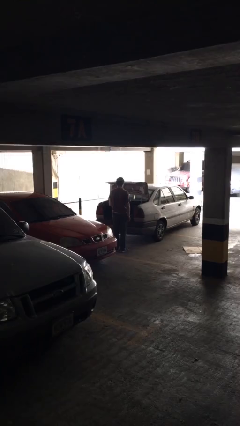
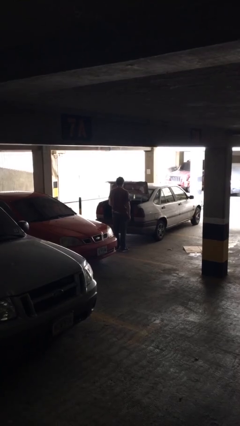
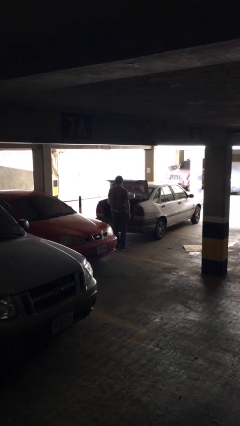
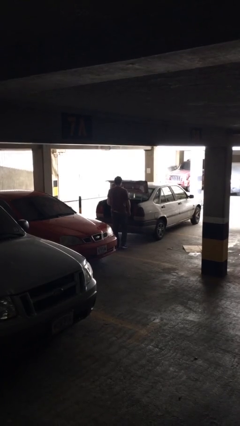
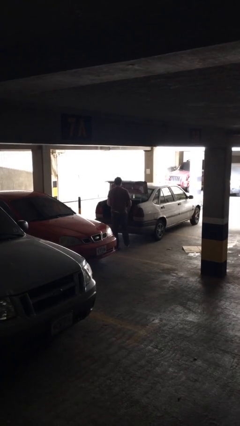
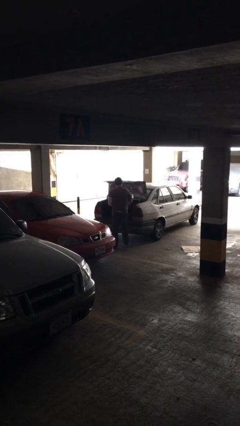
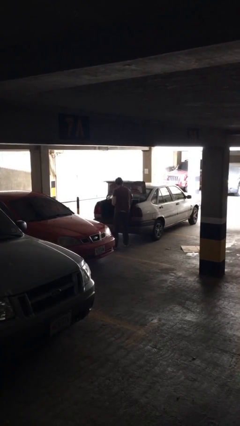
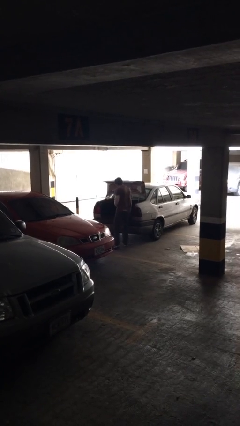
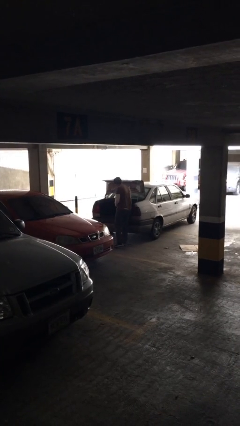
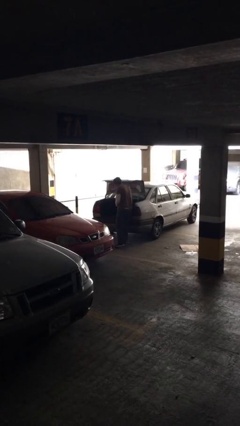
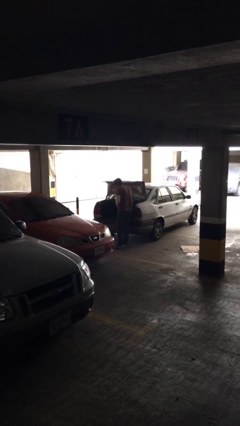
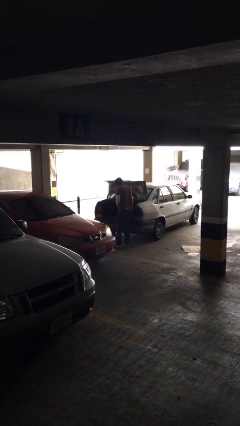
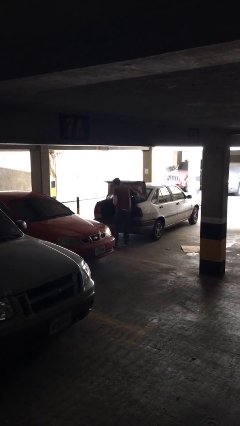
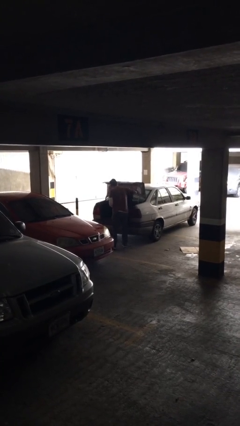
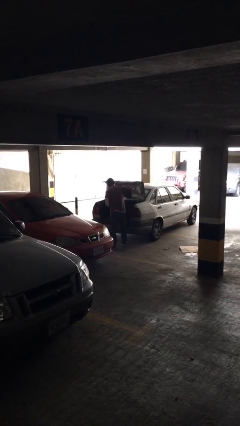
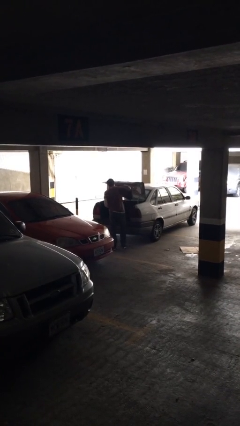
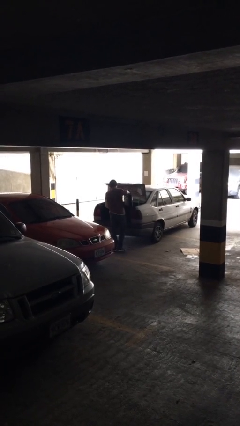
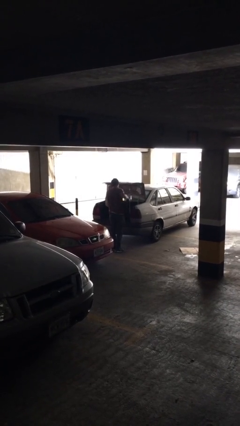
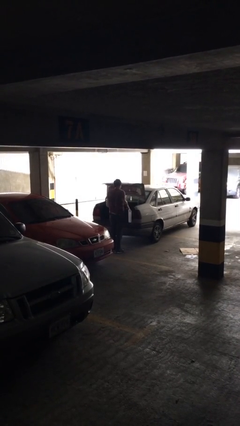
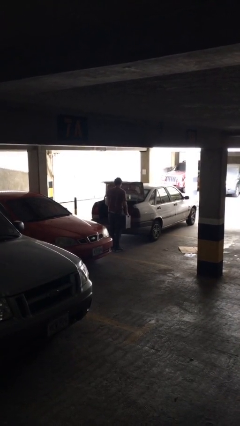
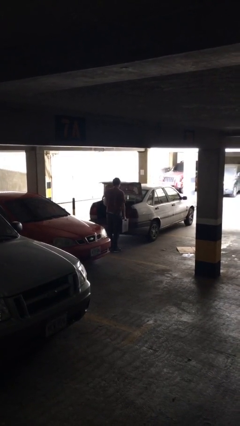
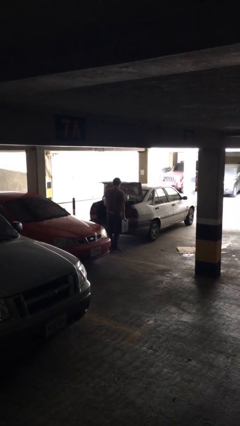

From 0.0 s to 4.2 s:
person unloads car

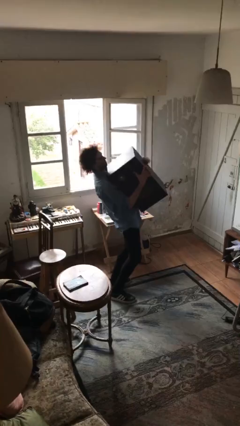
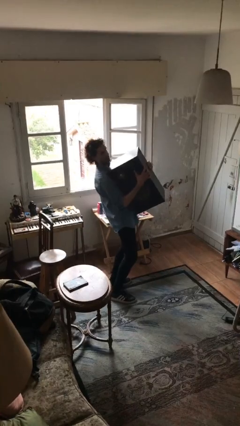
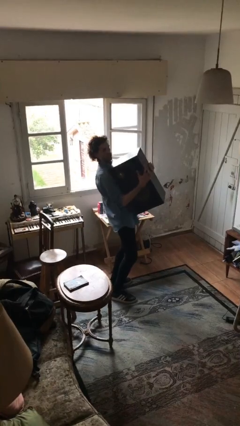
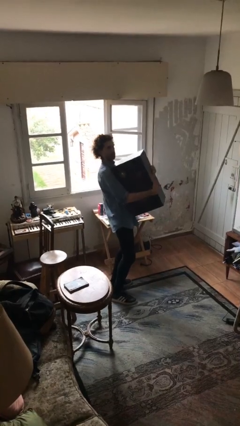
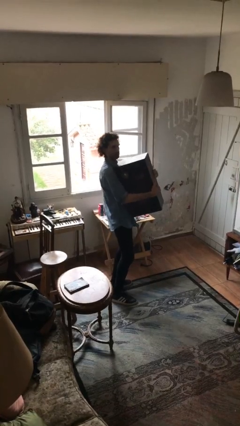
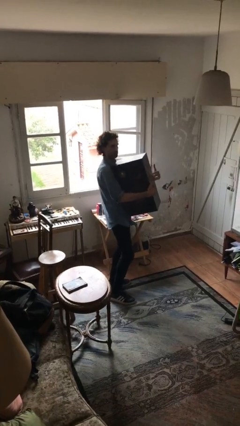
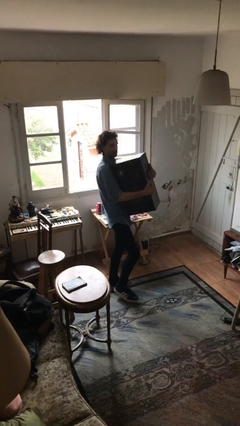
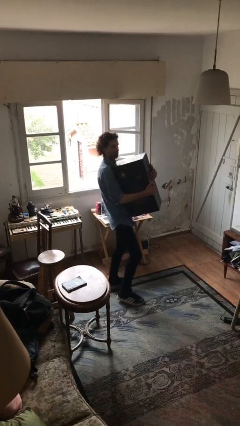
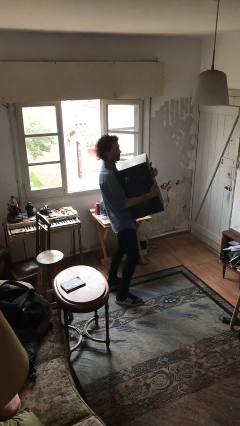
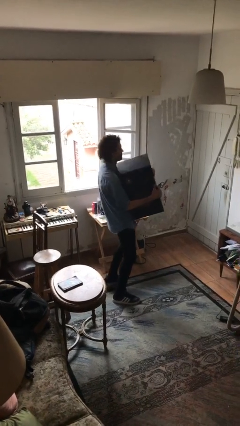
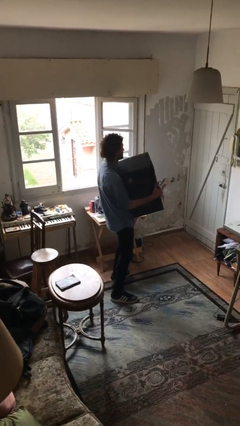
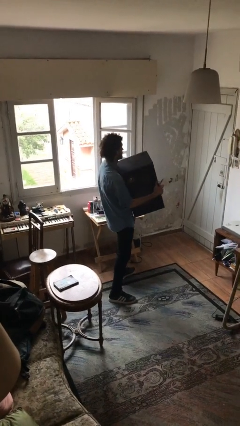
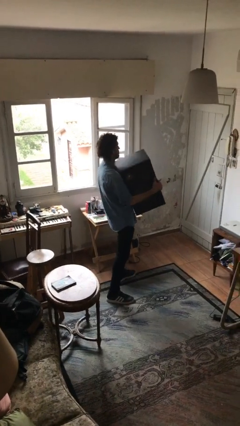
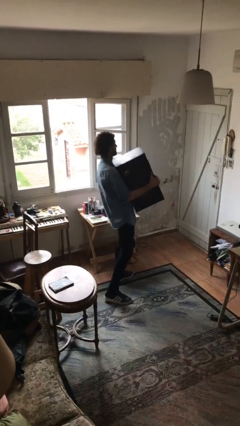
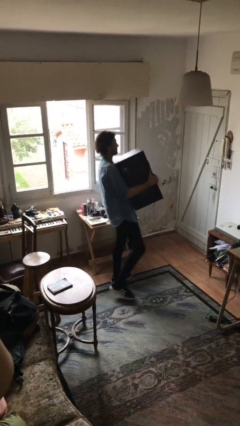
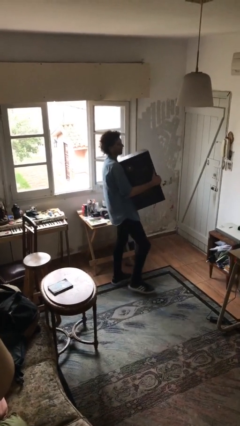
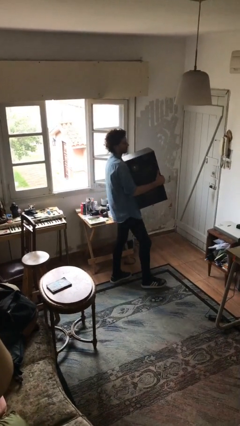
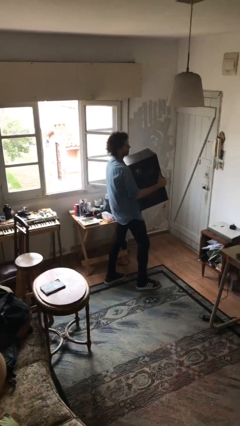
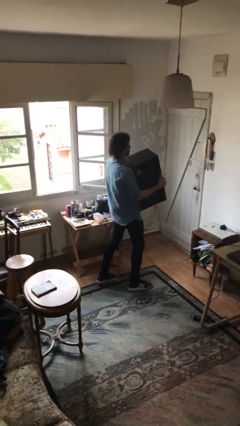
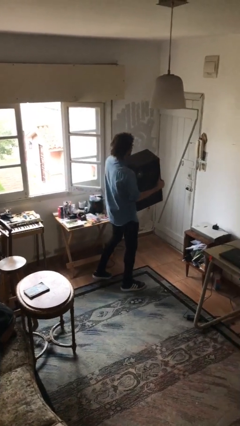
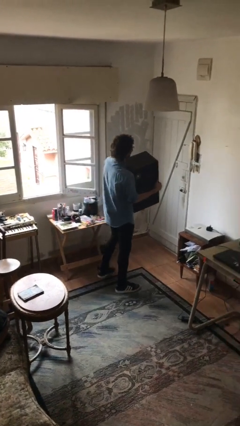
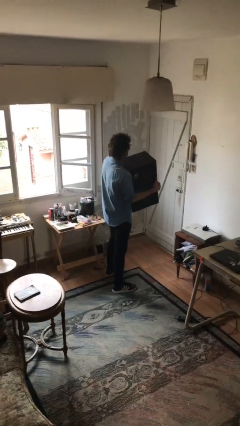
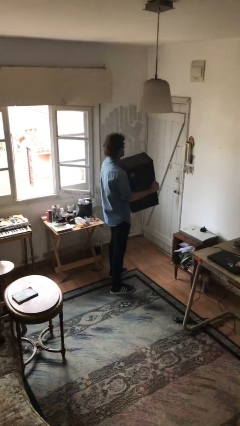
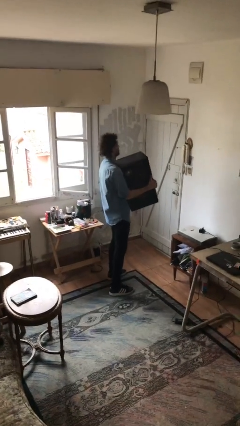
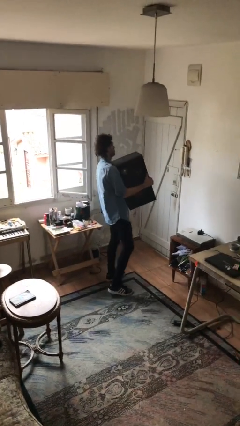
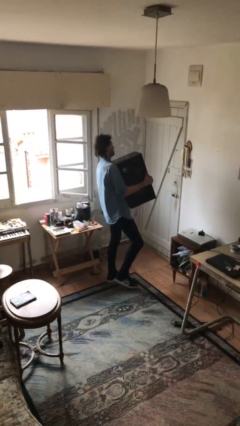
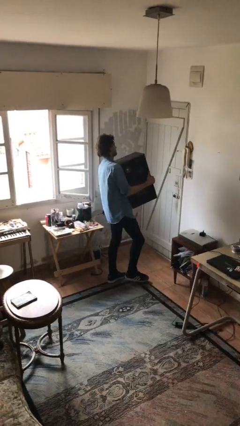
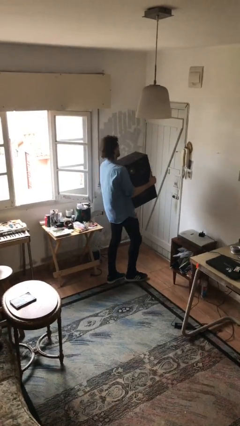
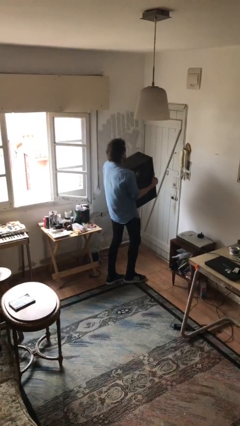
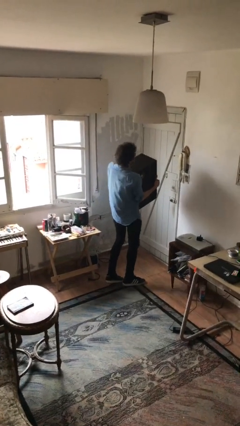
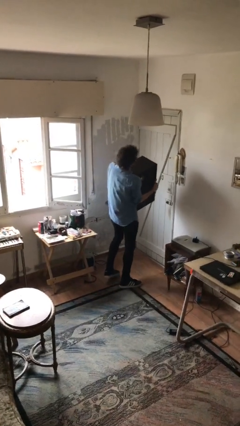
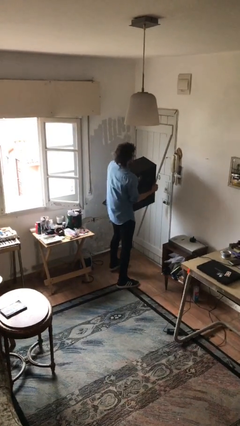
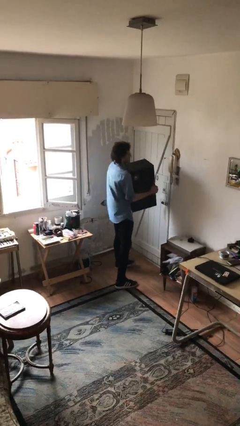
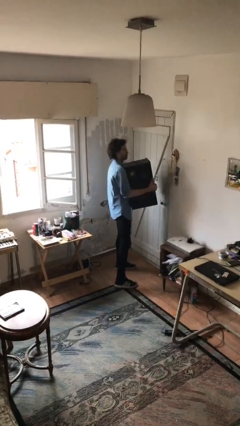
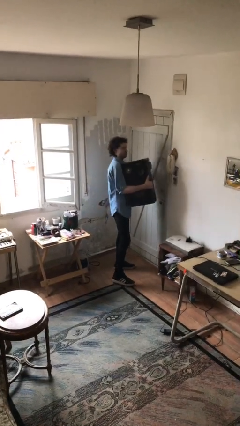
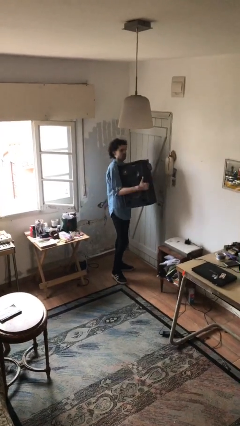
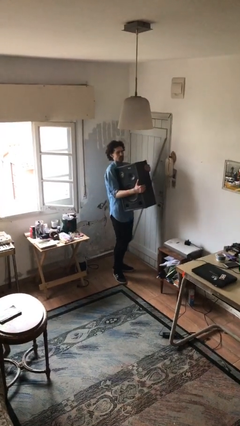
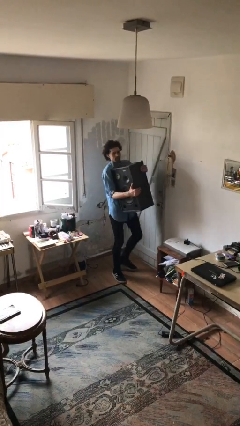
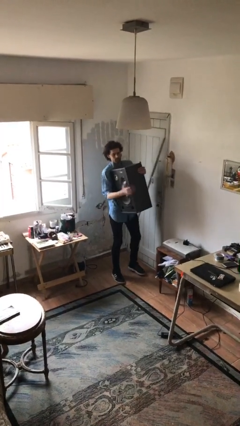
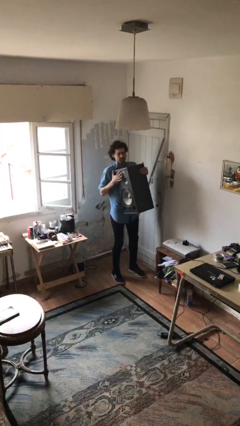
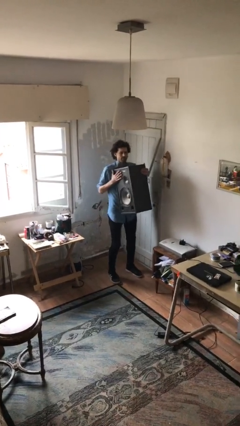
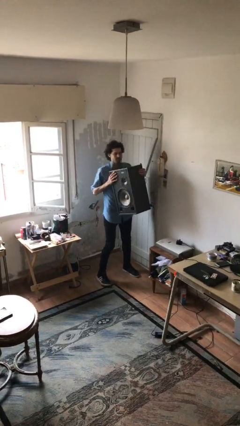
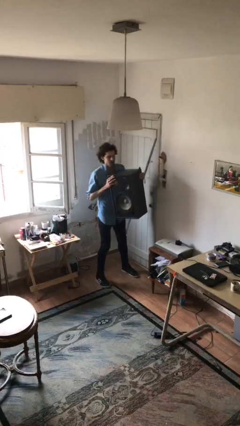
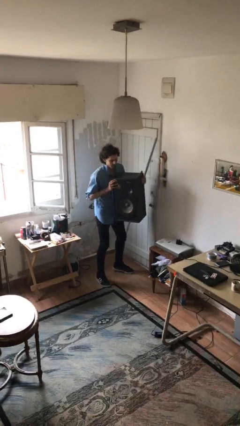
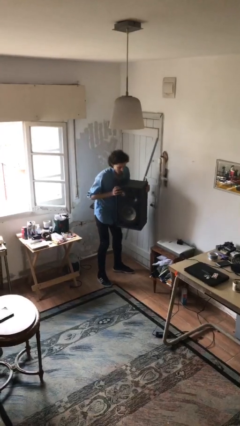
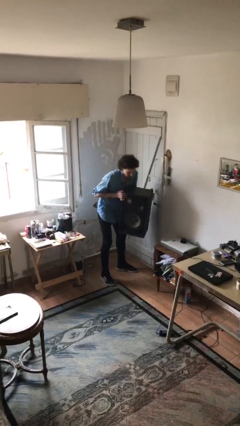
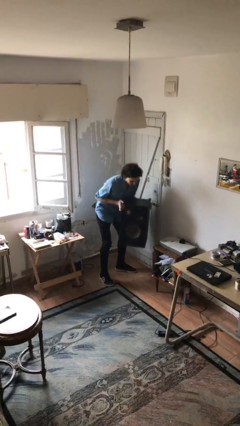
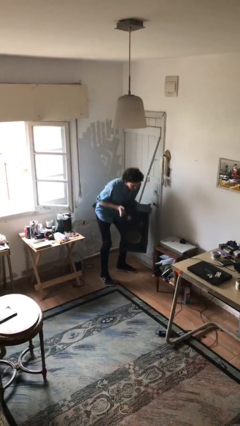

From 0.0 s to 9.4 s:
person carries heavy object

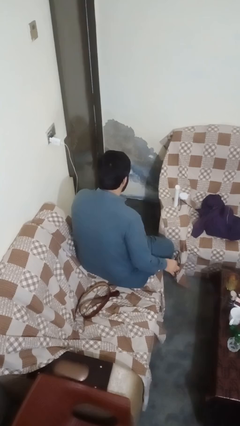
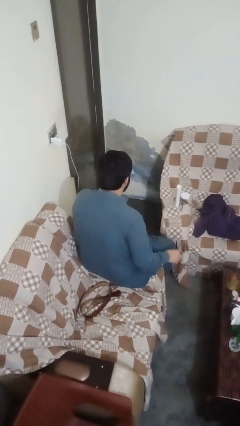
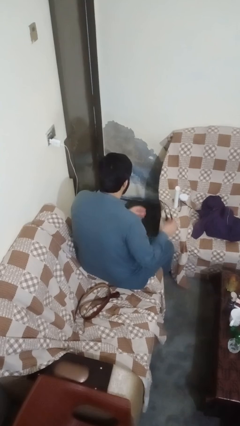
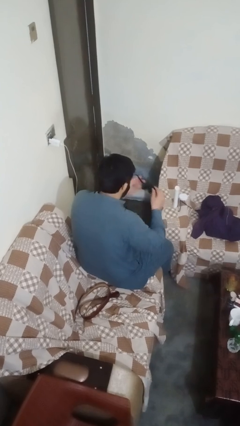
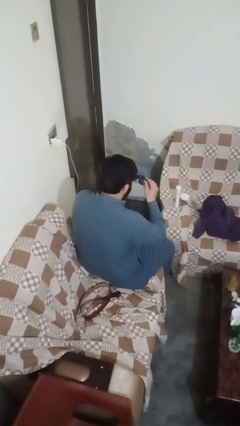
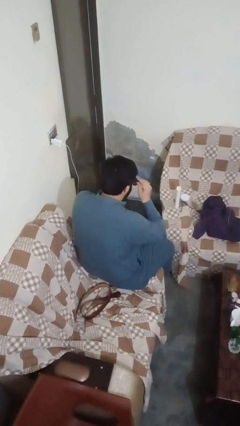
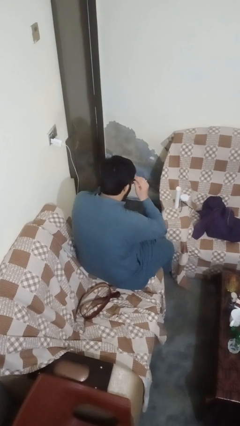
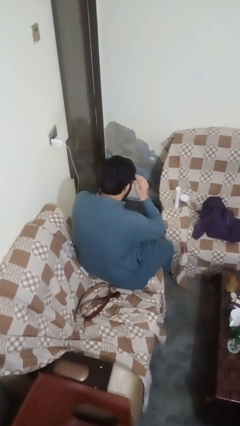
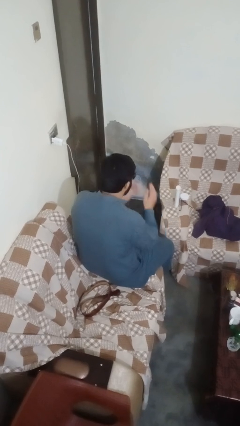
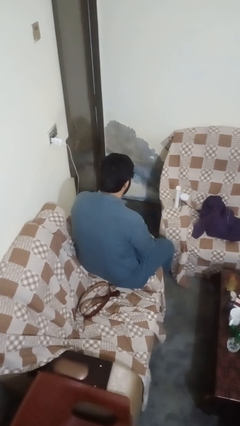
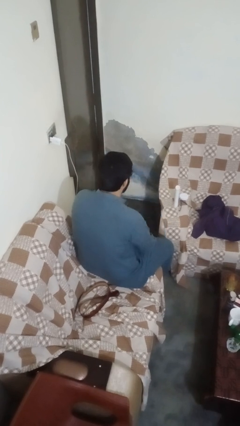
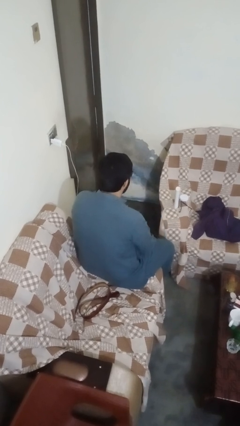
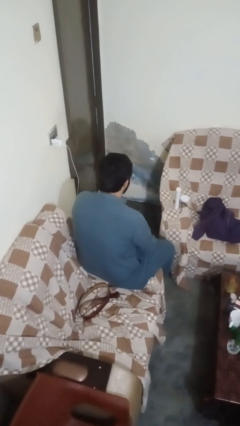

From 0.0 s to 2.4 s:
person puts on sunglasses

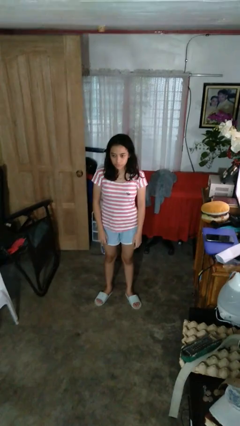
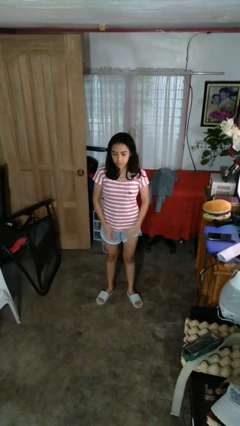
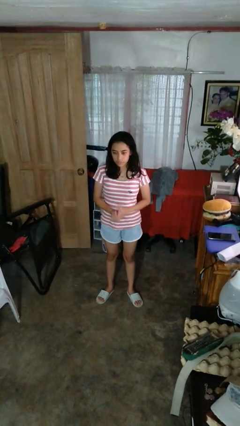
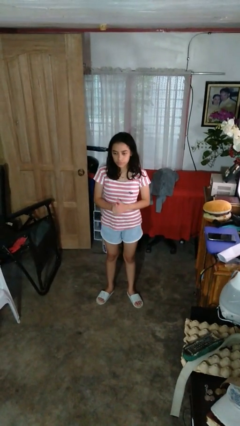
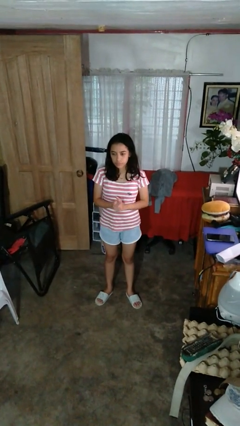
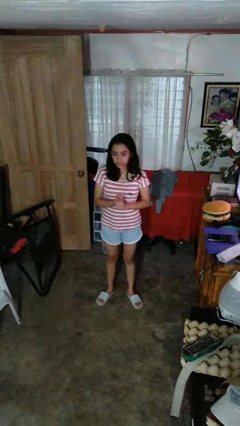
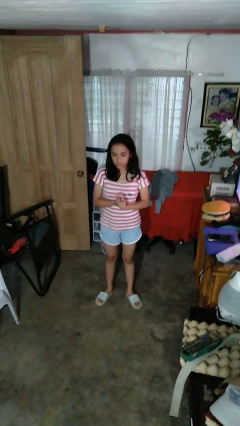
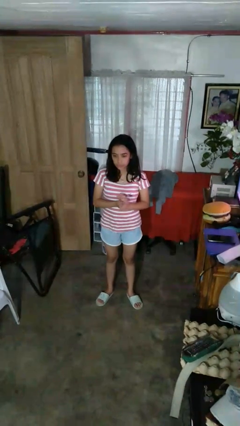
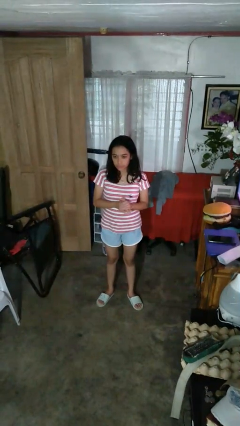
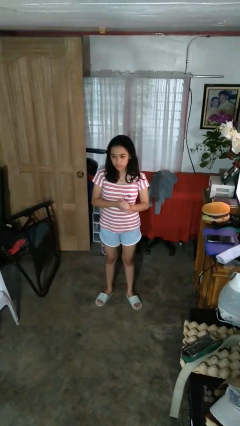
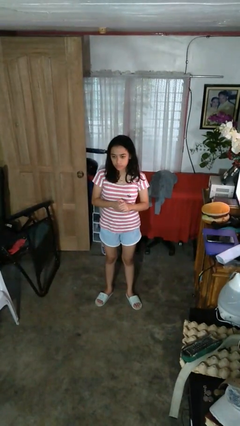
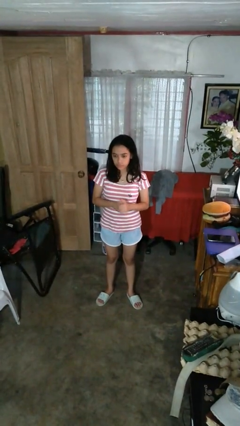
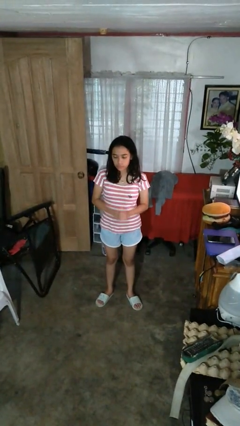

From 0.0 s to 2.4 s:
person cracks knuckles
